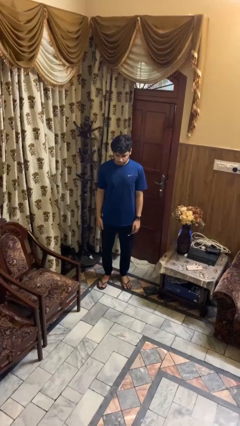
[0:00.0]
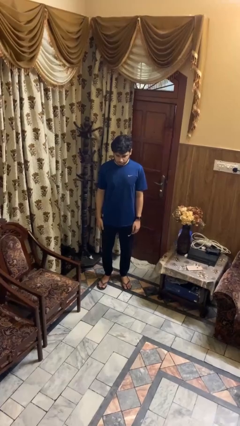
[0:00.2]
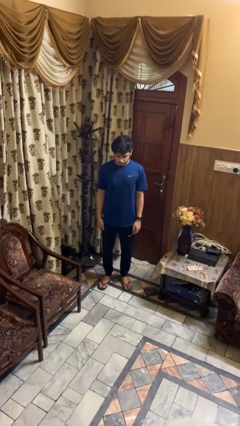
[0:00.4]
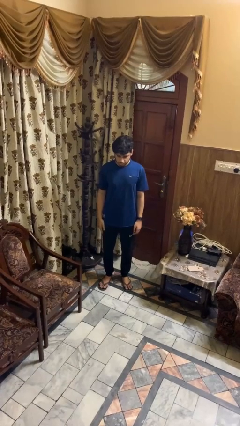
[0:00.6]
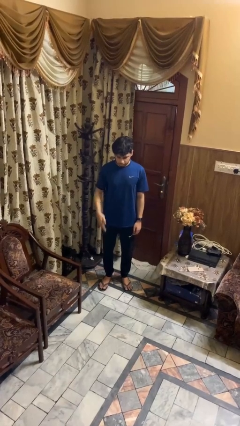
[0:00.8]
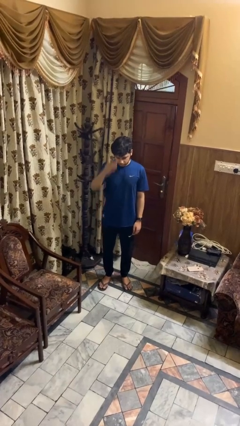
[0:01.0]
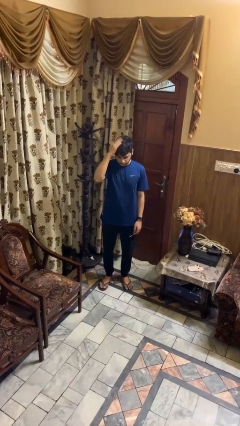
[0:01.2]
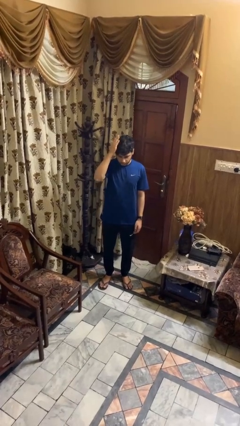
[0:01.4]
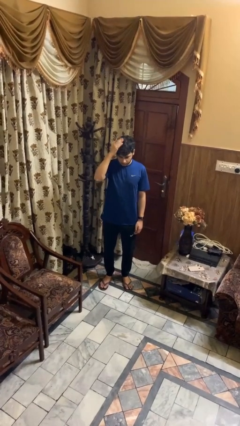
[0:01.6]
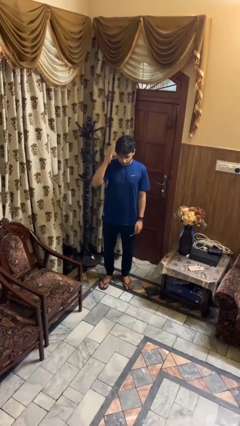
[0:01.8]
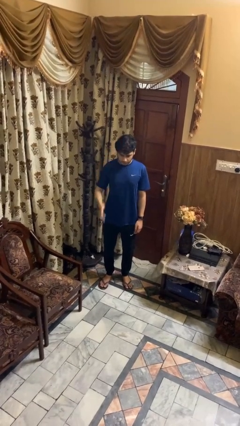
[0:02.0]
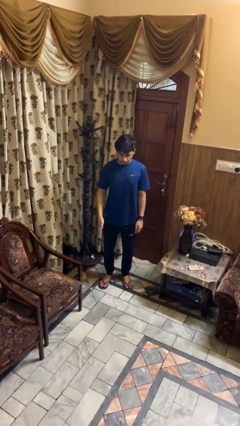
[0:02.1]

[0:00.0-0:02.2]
person pats head

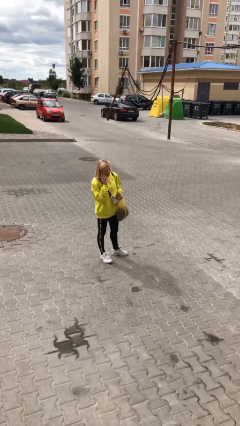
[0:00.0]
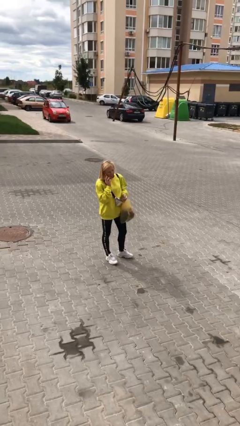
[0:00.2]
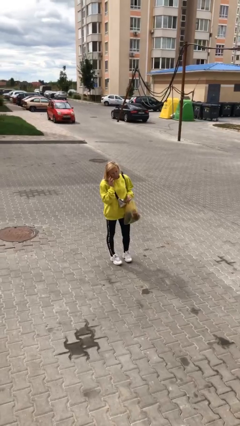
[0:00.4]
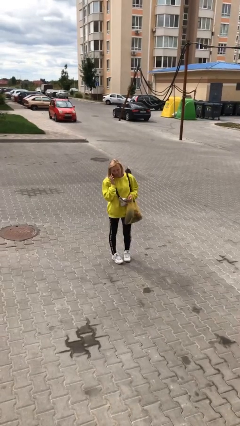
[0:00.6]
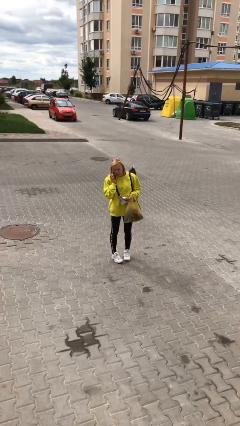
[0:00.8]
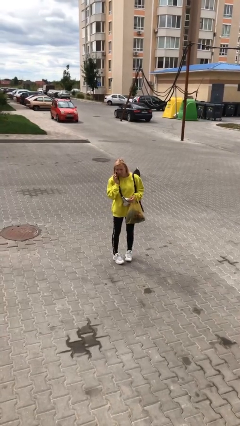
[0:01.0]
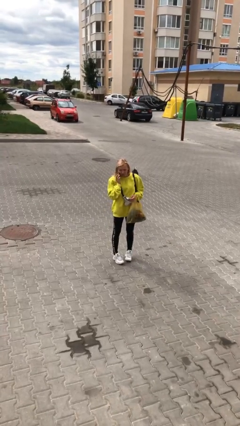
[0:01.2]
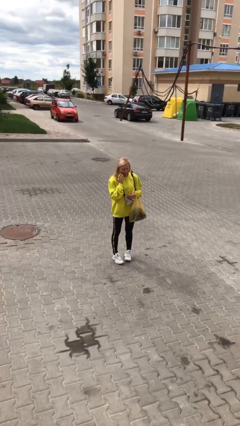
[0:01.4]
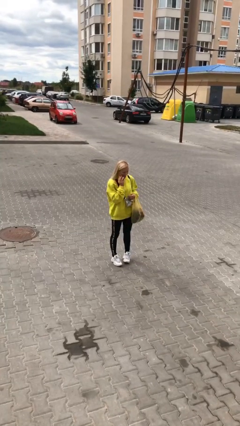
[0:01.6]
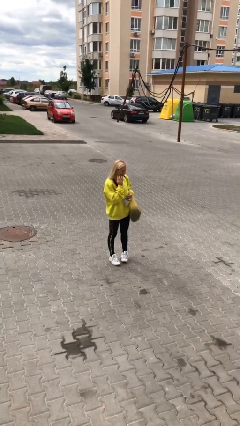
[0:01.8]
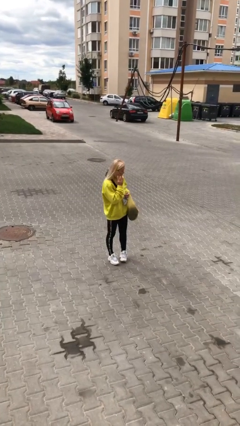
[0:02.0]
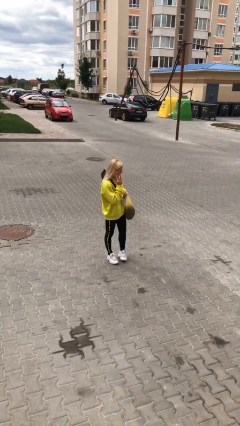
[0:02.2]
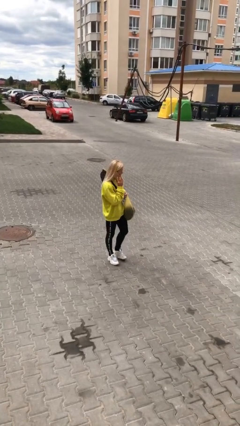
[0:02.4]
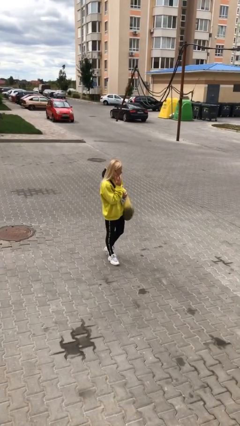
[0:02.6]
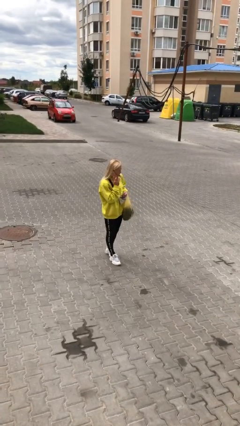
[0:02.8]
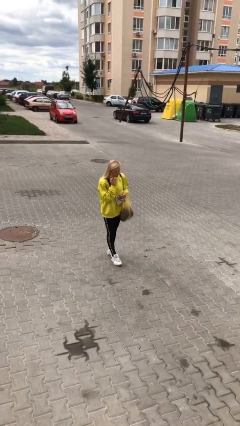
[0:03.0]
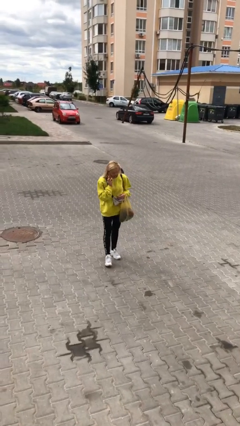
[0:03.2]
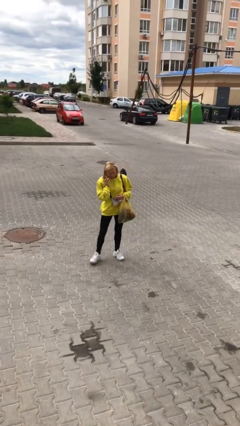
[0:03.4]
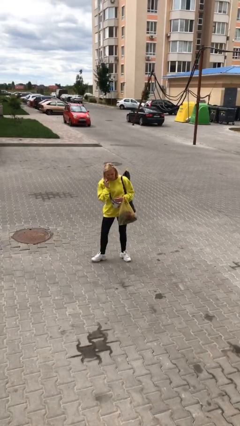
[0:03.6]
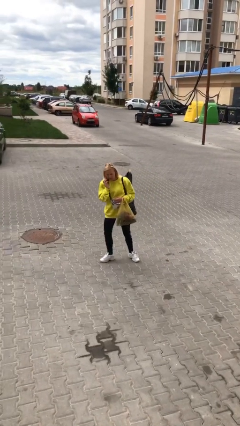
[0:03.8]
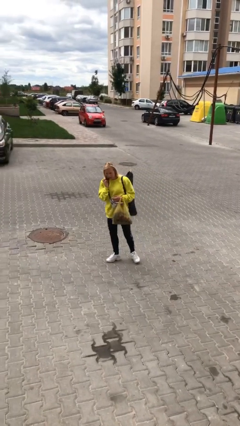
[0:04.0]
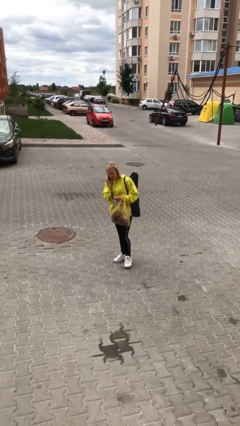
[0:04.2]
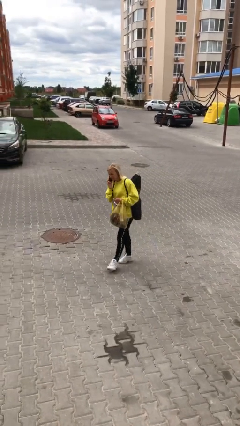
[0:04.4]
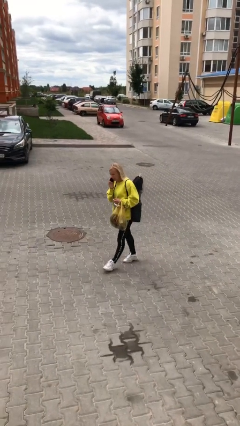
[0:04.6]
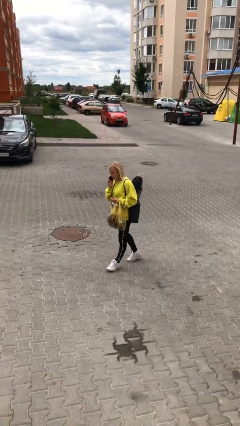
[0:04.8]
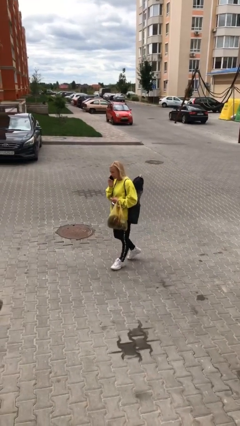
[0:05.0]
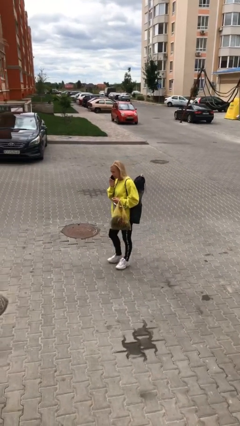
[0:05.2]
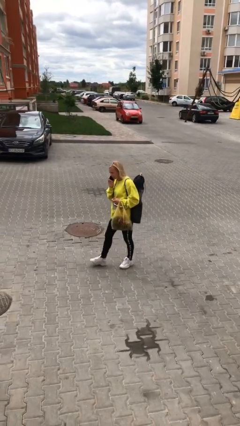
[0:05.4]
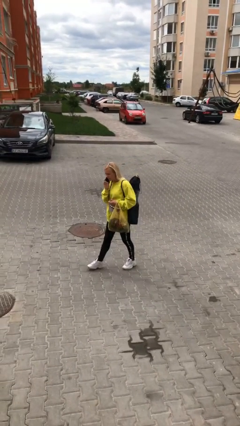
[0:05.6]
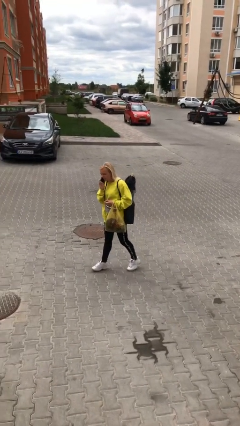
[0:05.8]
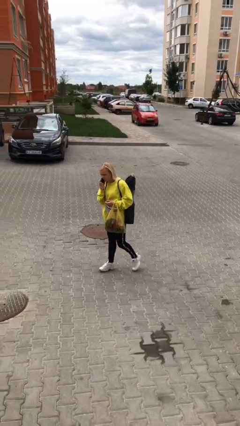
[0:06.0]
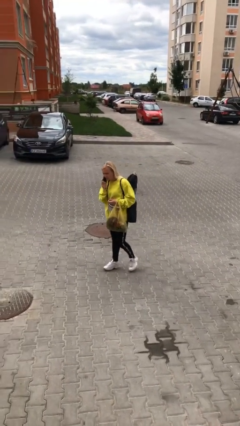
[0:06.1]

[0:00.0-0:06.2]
person talks on phone

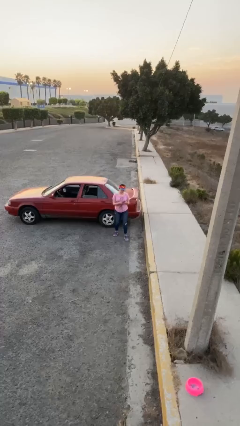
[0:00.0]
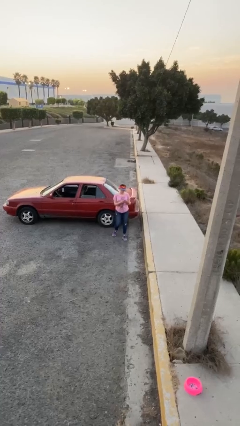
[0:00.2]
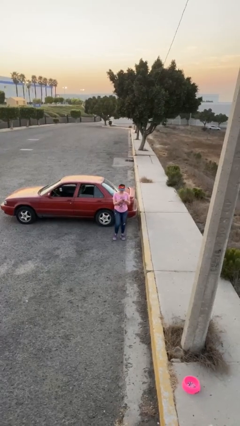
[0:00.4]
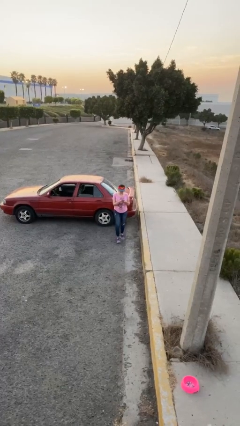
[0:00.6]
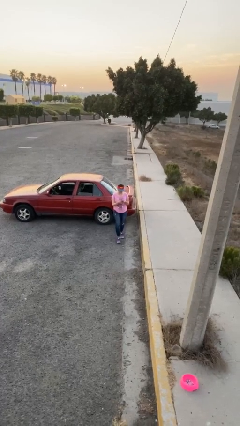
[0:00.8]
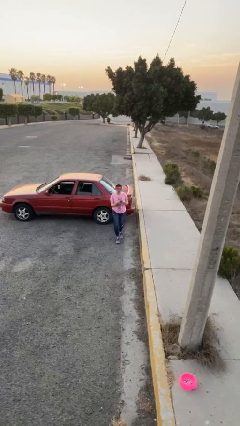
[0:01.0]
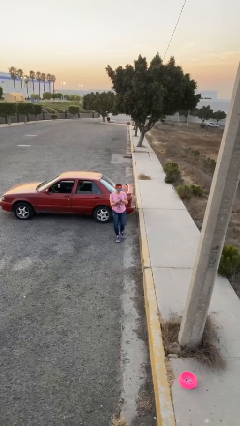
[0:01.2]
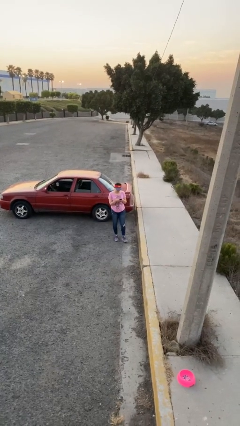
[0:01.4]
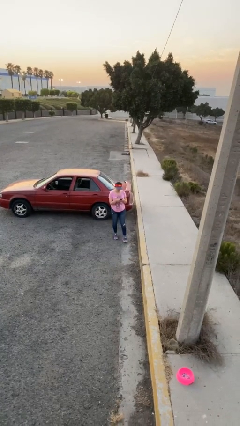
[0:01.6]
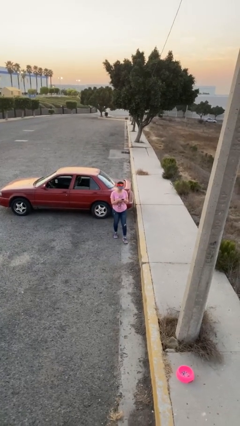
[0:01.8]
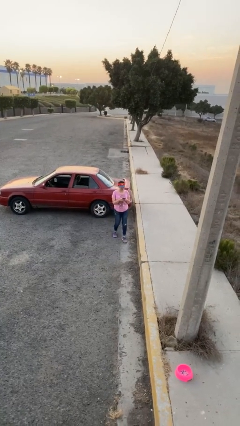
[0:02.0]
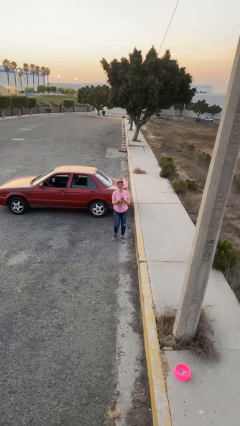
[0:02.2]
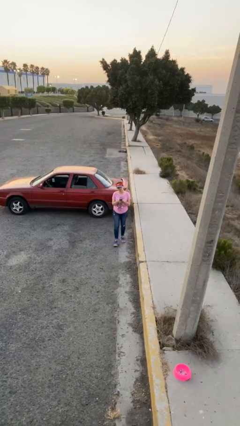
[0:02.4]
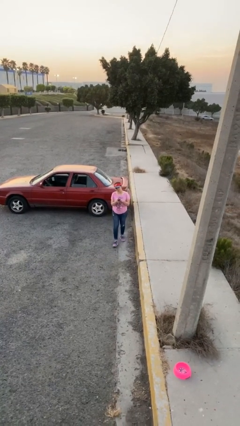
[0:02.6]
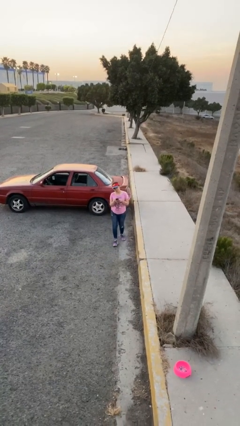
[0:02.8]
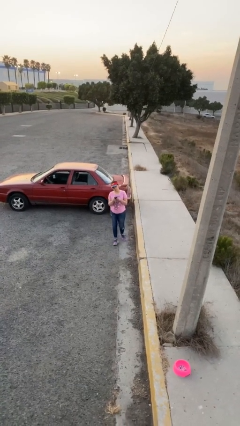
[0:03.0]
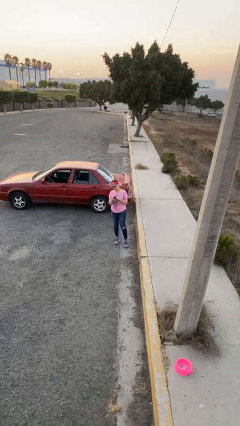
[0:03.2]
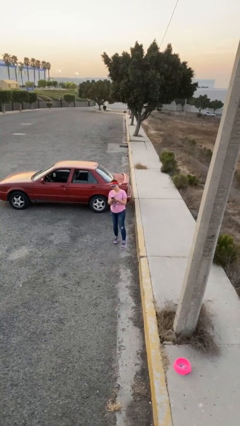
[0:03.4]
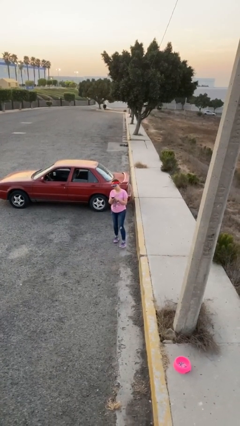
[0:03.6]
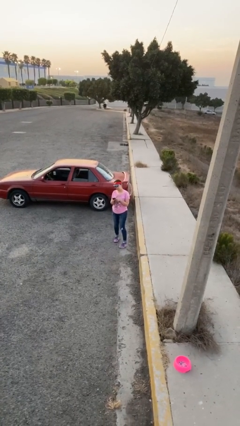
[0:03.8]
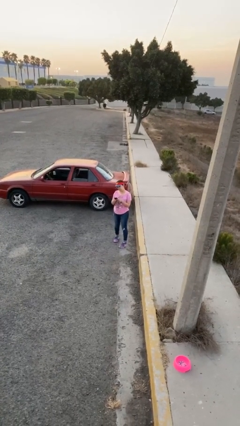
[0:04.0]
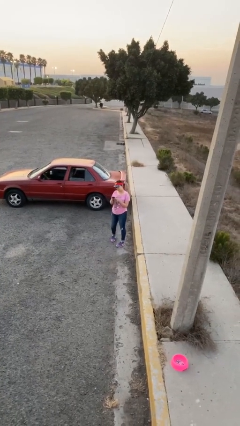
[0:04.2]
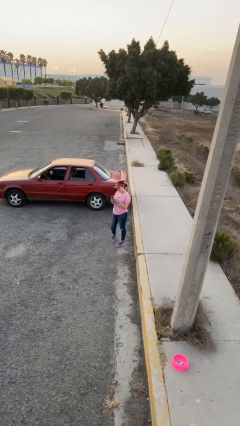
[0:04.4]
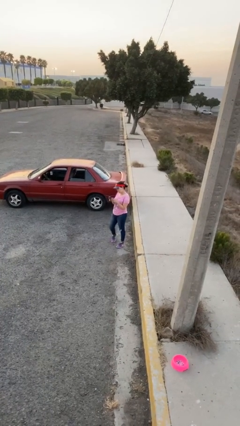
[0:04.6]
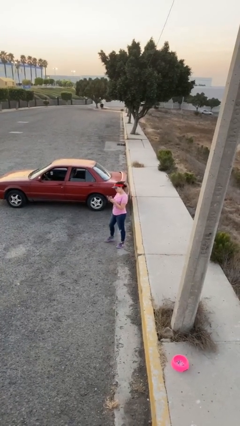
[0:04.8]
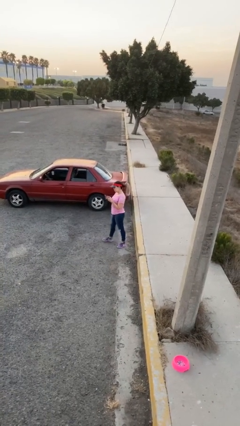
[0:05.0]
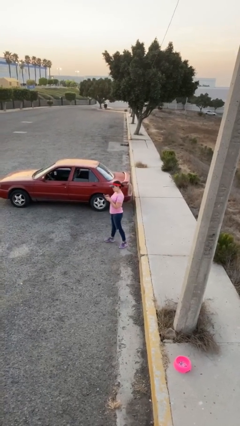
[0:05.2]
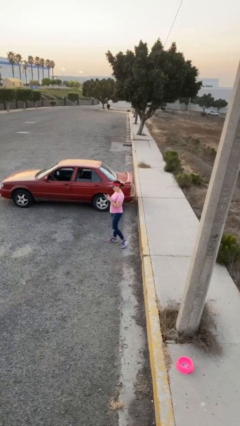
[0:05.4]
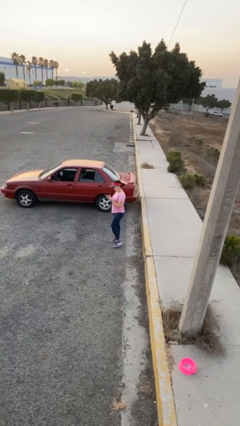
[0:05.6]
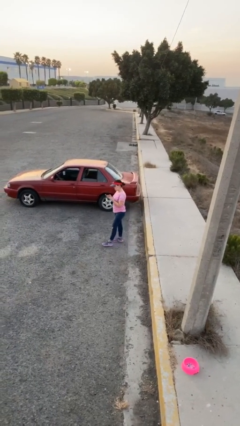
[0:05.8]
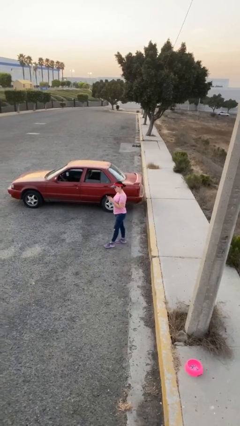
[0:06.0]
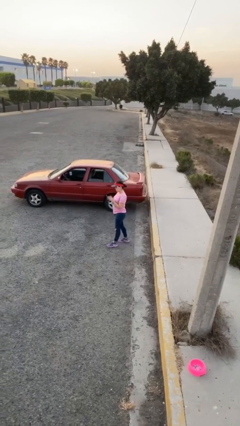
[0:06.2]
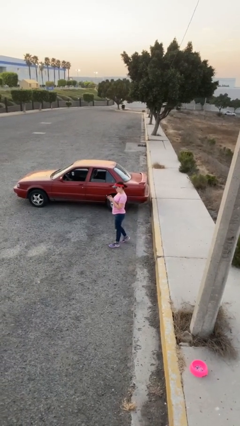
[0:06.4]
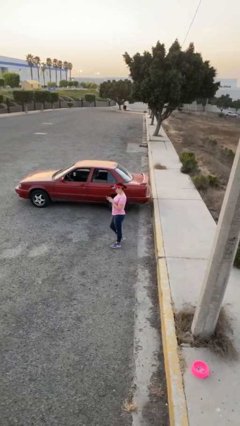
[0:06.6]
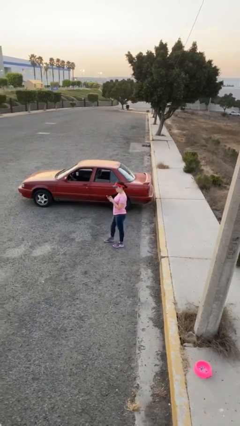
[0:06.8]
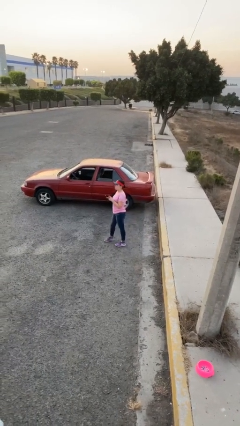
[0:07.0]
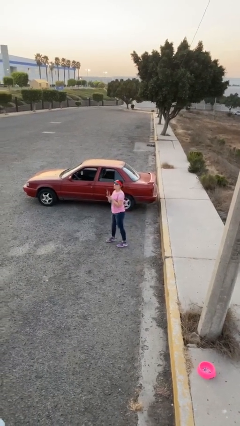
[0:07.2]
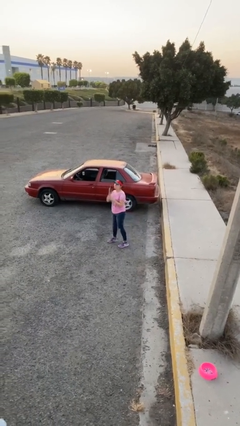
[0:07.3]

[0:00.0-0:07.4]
person texts on phone

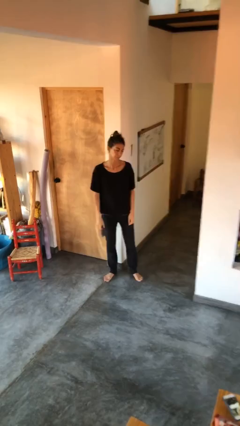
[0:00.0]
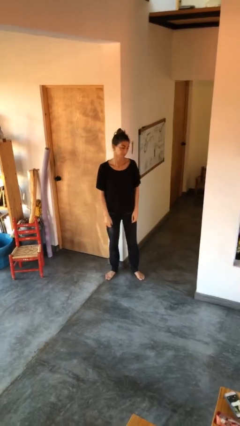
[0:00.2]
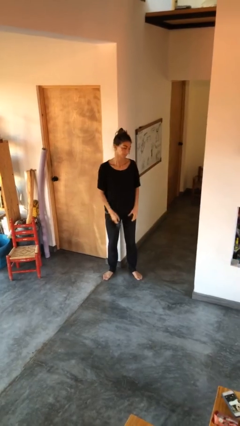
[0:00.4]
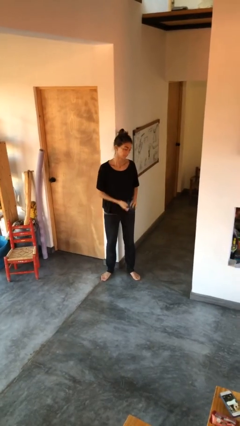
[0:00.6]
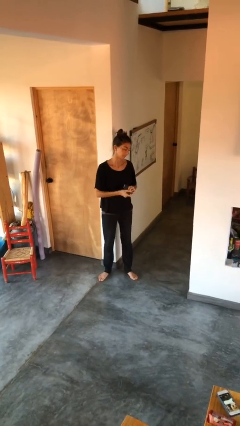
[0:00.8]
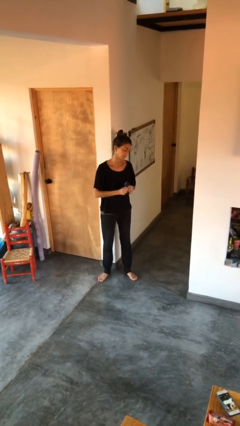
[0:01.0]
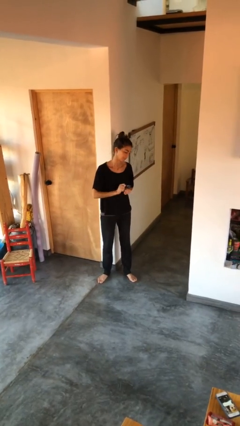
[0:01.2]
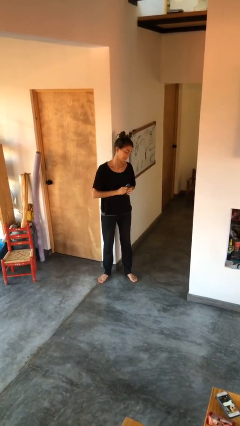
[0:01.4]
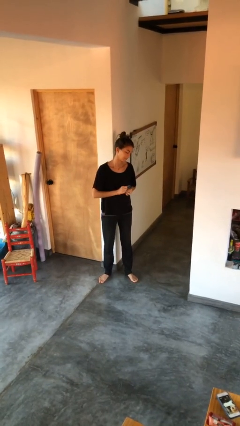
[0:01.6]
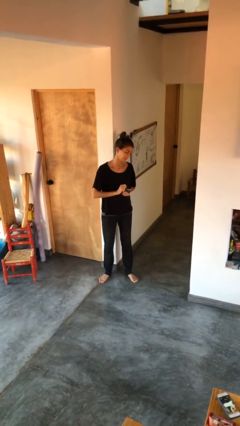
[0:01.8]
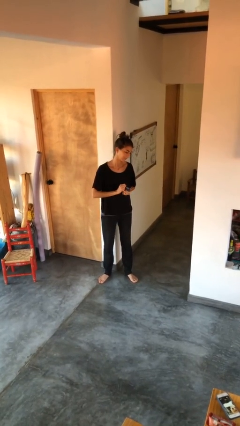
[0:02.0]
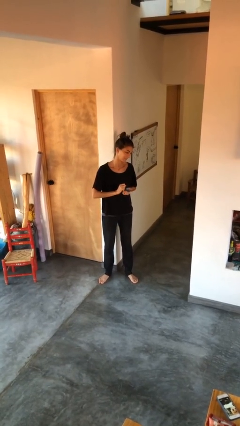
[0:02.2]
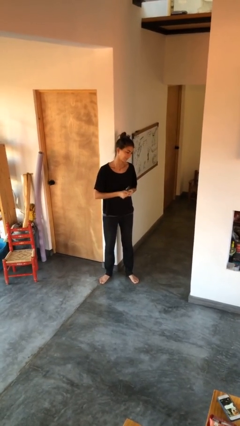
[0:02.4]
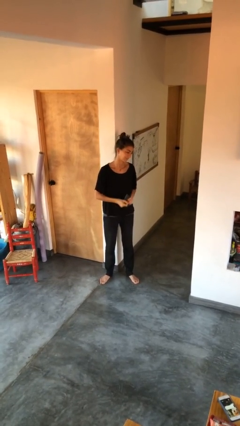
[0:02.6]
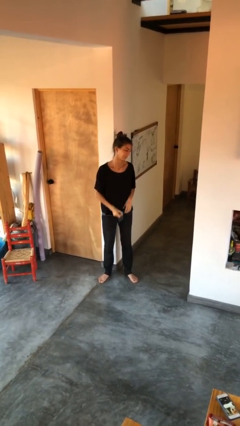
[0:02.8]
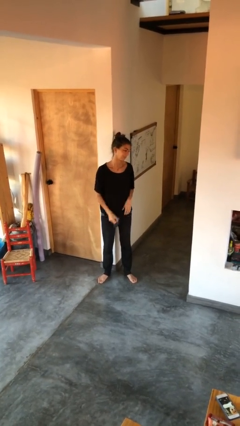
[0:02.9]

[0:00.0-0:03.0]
person squeezes object
